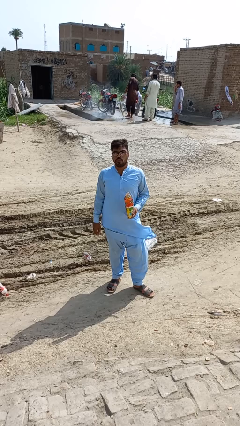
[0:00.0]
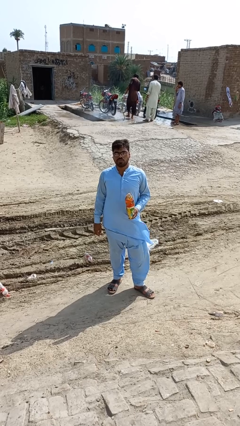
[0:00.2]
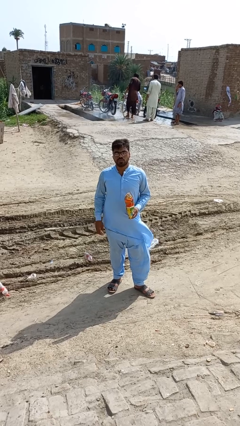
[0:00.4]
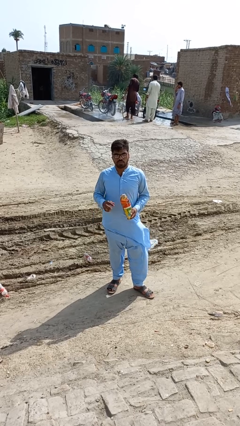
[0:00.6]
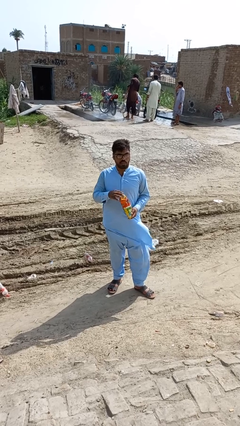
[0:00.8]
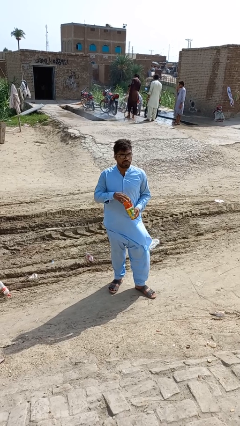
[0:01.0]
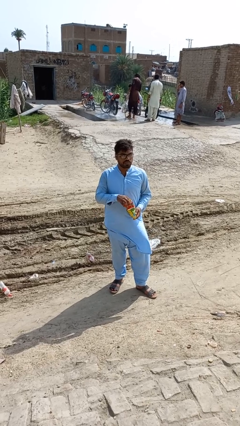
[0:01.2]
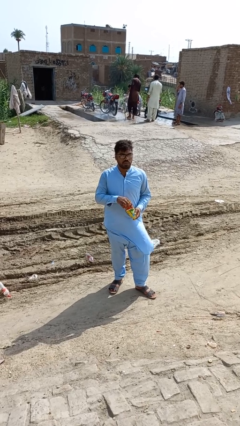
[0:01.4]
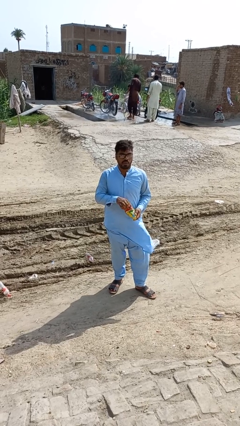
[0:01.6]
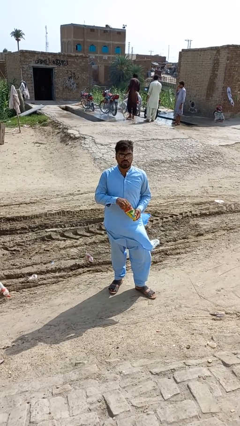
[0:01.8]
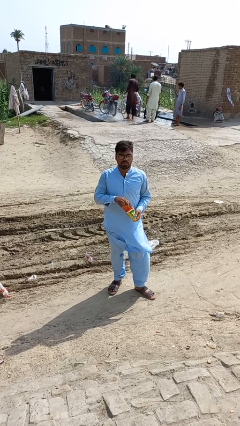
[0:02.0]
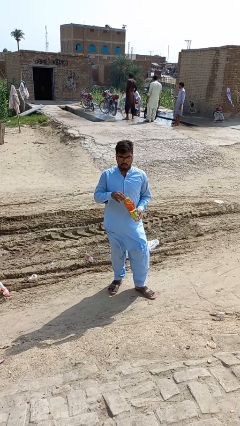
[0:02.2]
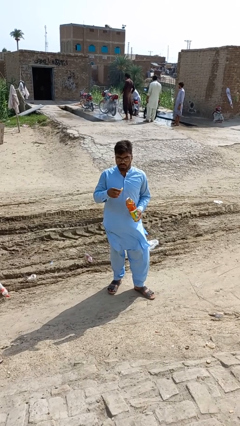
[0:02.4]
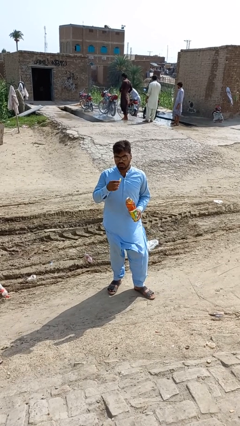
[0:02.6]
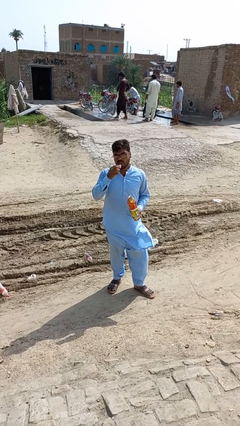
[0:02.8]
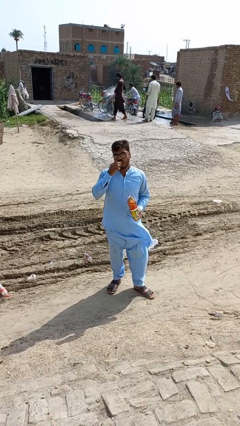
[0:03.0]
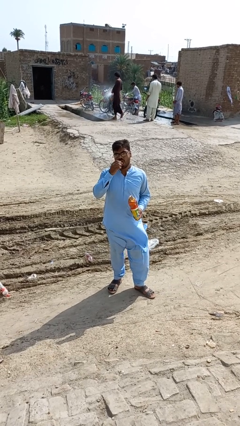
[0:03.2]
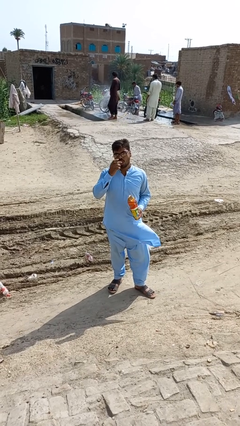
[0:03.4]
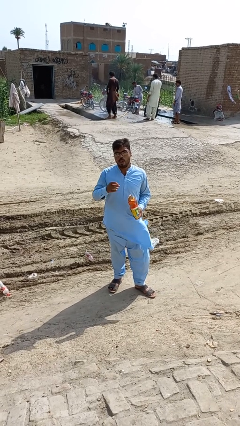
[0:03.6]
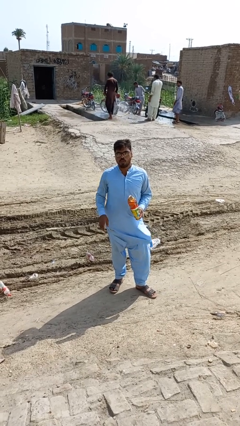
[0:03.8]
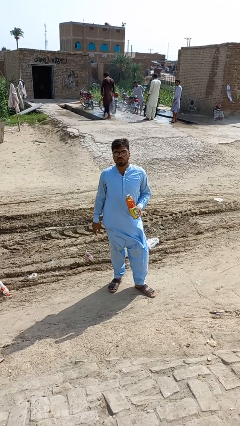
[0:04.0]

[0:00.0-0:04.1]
person eats snack from bag

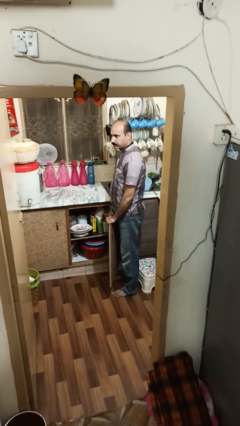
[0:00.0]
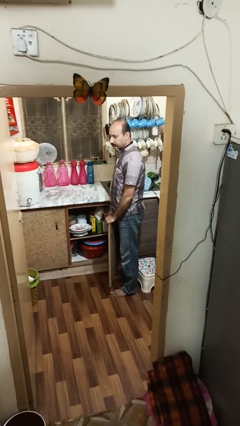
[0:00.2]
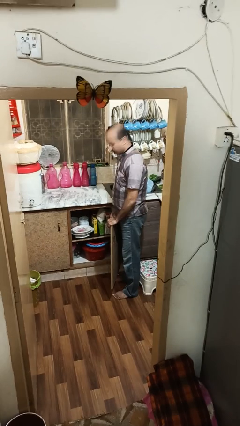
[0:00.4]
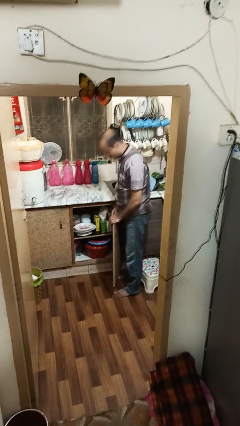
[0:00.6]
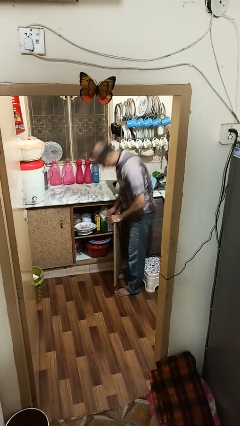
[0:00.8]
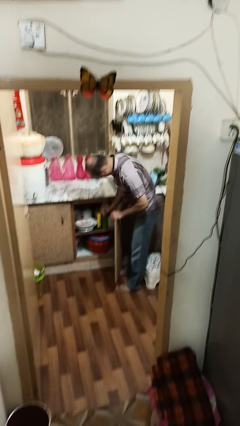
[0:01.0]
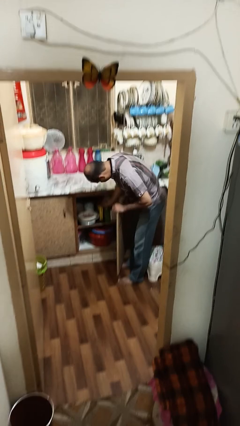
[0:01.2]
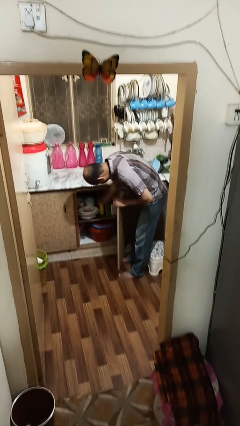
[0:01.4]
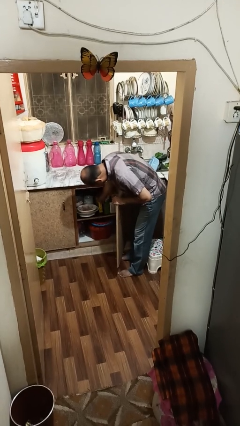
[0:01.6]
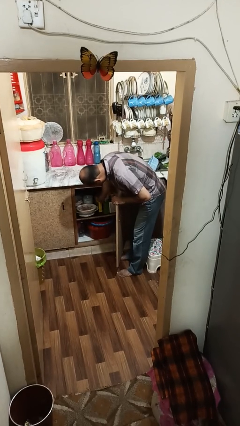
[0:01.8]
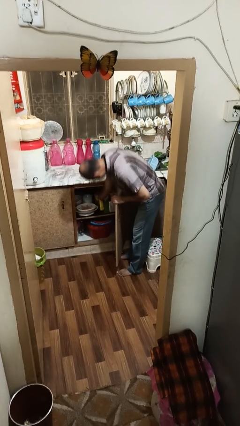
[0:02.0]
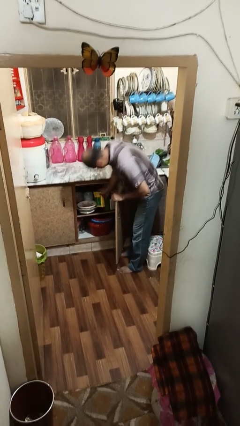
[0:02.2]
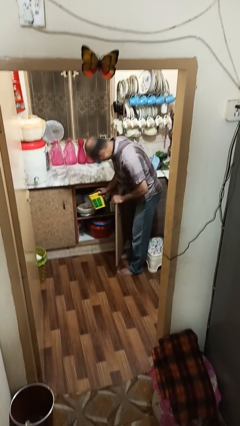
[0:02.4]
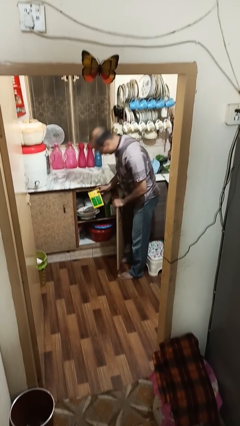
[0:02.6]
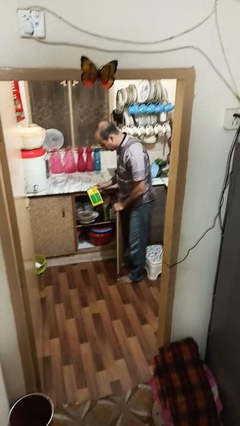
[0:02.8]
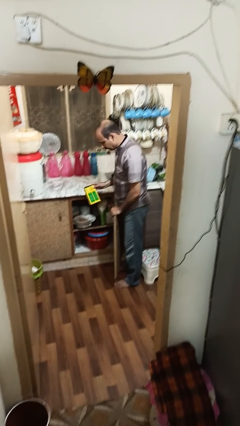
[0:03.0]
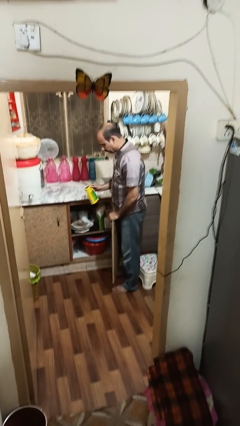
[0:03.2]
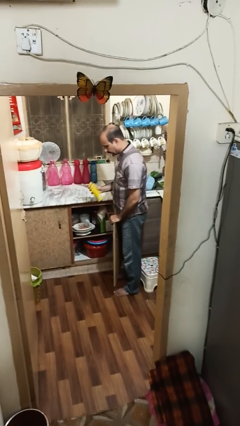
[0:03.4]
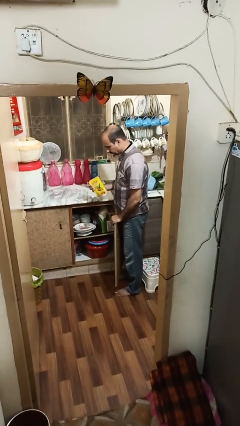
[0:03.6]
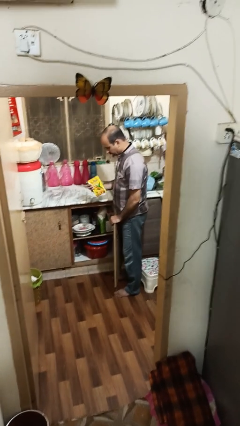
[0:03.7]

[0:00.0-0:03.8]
person takes object from cabinet

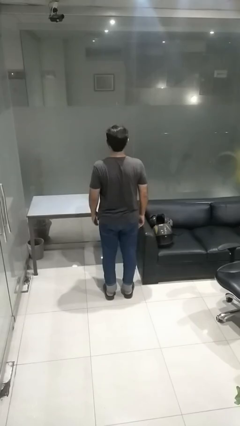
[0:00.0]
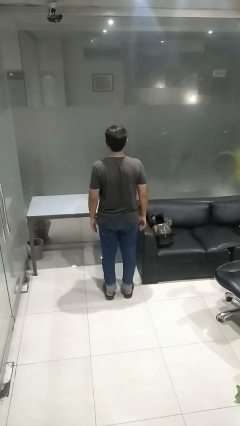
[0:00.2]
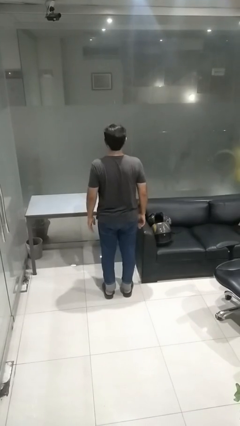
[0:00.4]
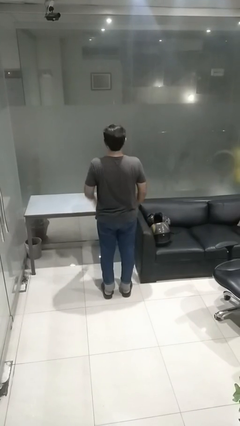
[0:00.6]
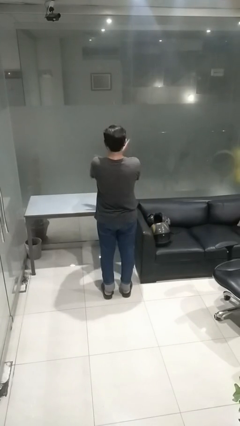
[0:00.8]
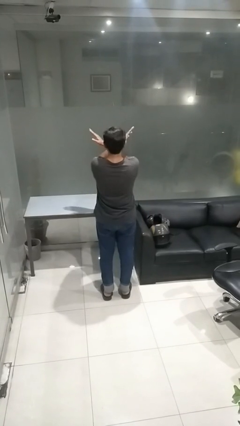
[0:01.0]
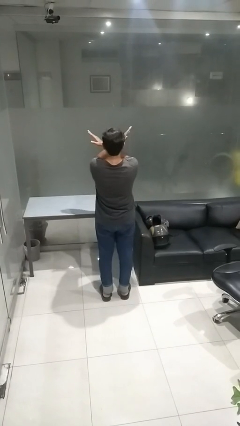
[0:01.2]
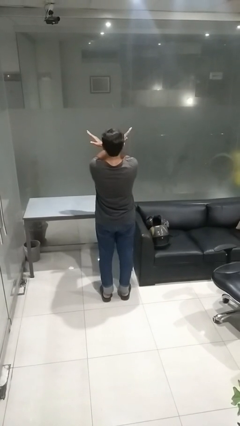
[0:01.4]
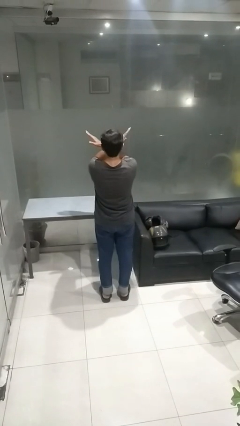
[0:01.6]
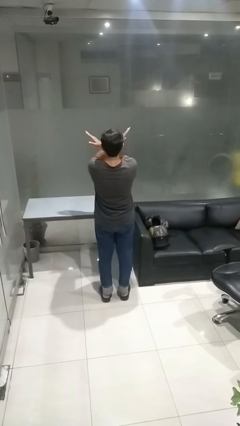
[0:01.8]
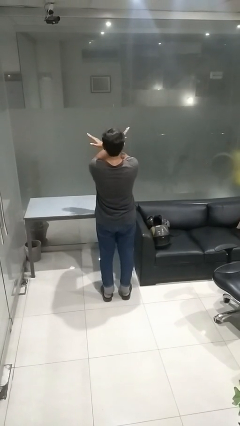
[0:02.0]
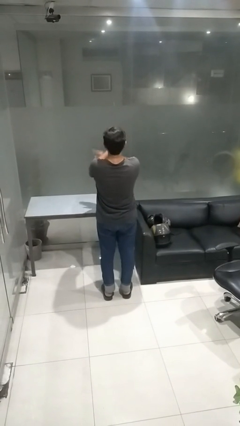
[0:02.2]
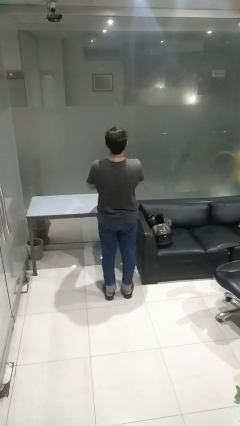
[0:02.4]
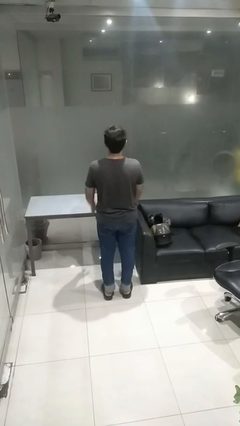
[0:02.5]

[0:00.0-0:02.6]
person gestures arms x

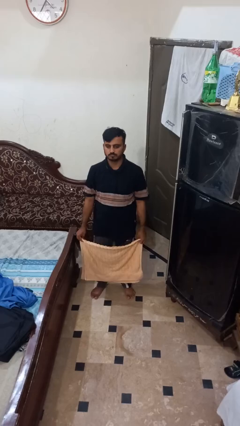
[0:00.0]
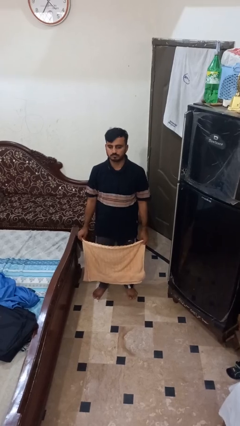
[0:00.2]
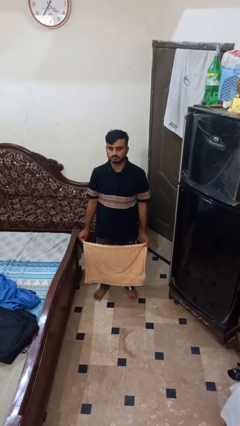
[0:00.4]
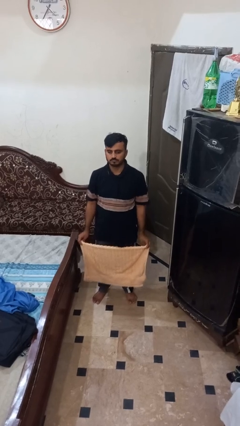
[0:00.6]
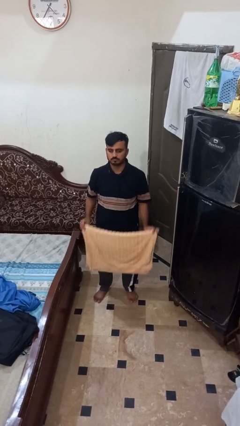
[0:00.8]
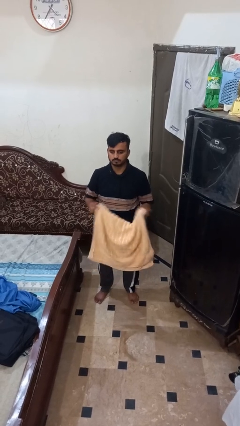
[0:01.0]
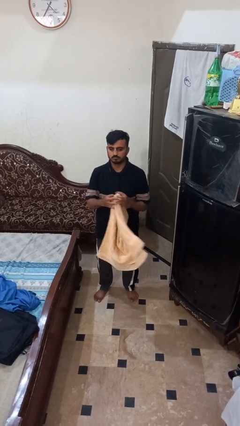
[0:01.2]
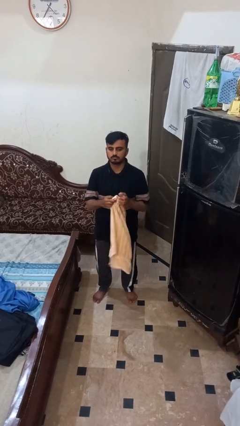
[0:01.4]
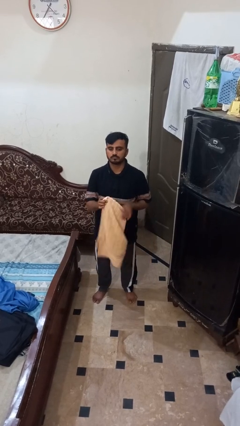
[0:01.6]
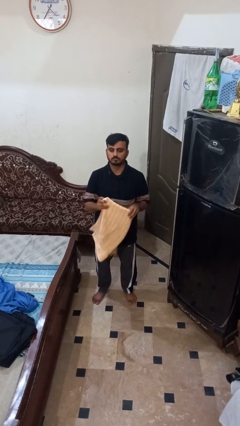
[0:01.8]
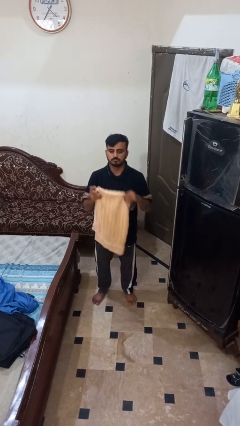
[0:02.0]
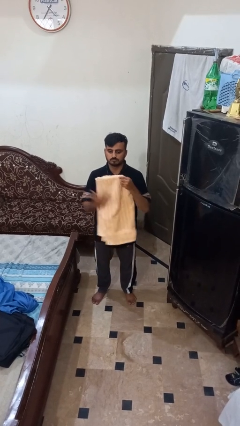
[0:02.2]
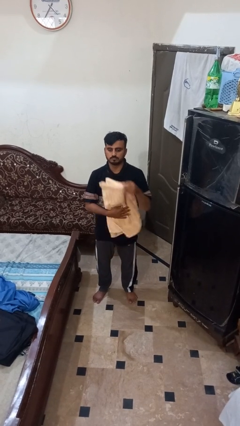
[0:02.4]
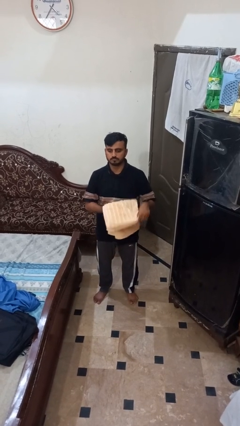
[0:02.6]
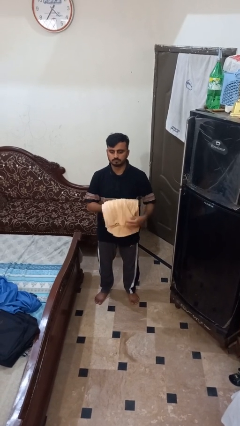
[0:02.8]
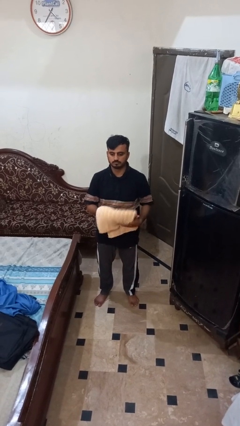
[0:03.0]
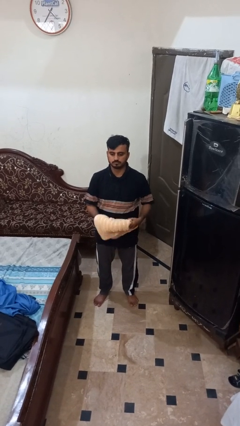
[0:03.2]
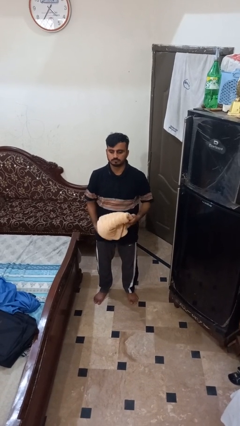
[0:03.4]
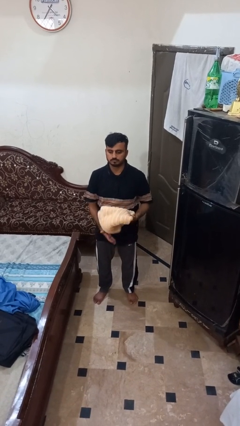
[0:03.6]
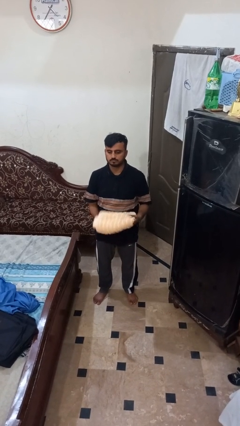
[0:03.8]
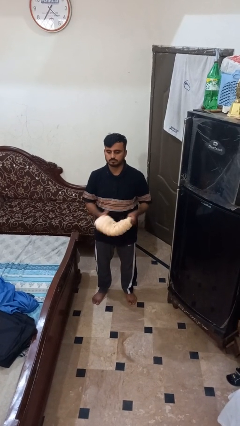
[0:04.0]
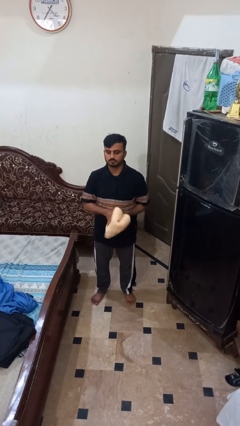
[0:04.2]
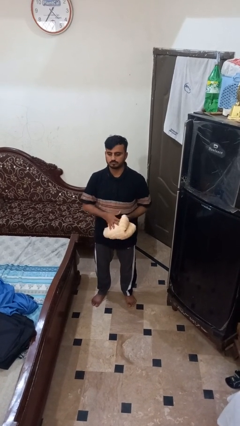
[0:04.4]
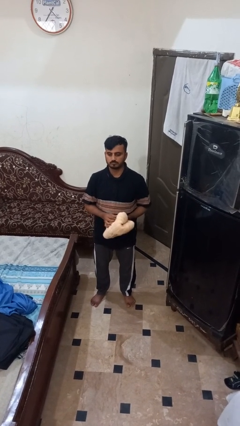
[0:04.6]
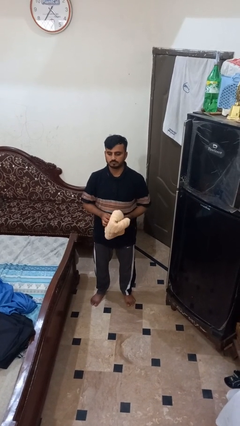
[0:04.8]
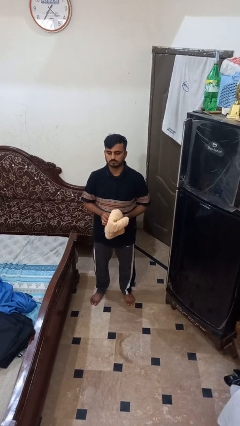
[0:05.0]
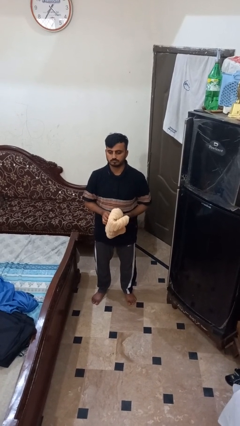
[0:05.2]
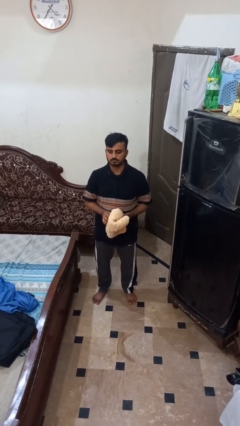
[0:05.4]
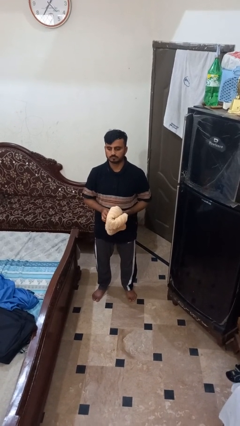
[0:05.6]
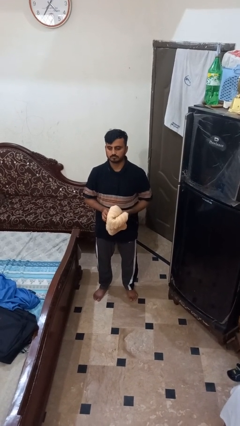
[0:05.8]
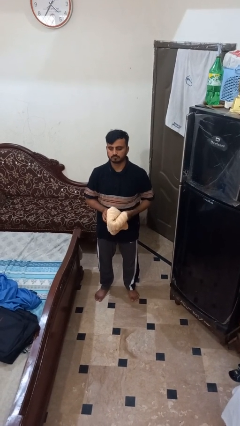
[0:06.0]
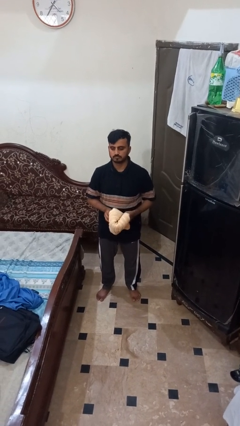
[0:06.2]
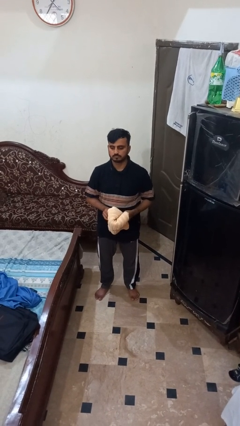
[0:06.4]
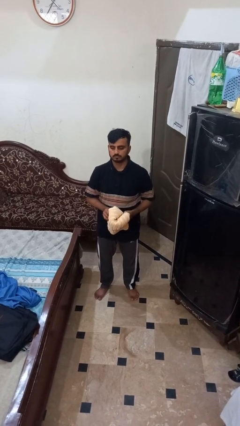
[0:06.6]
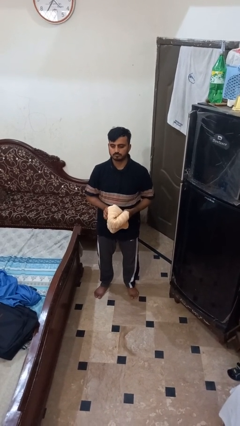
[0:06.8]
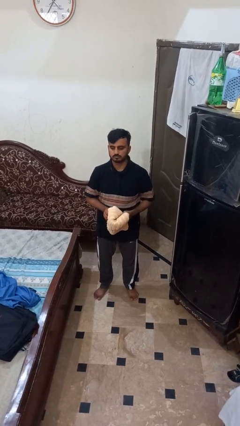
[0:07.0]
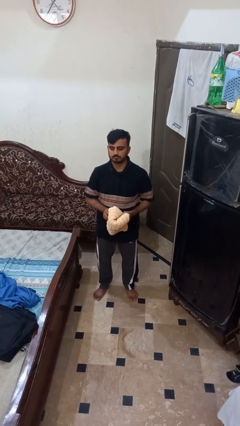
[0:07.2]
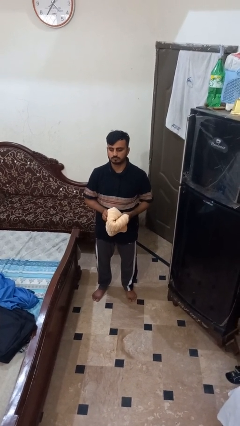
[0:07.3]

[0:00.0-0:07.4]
person folds towel
